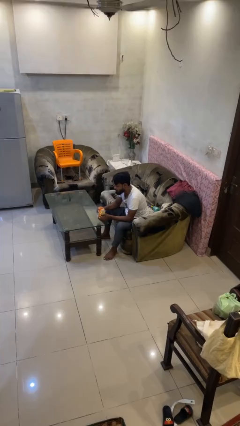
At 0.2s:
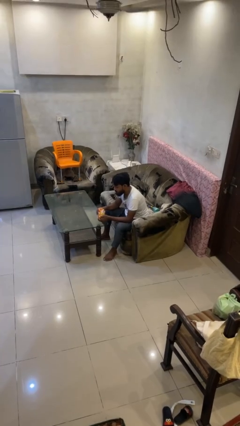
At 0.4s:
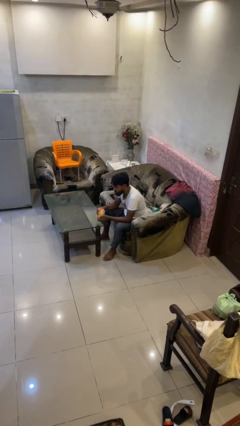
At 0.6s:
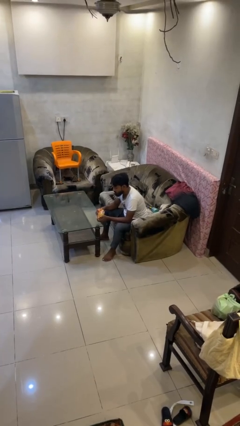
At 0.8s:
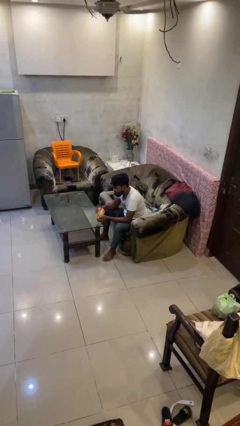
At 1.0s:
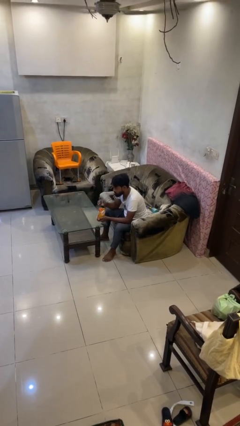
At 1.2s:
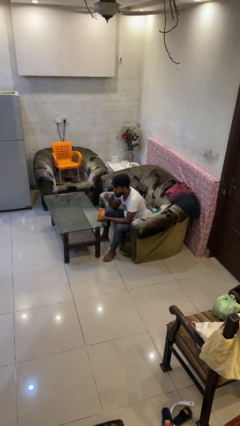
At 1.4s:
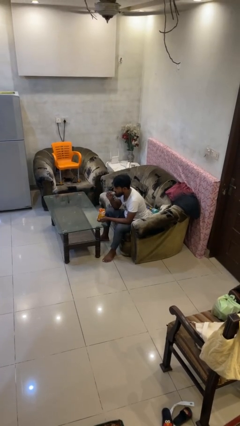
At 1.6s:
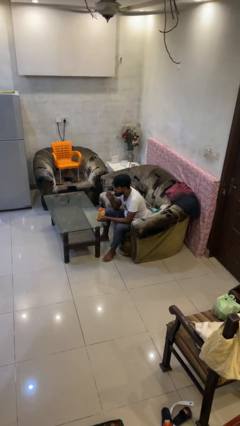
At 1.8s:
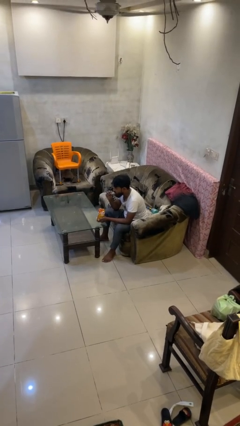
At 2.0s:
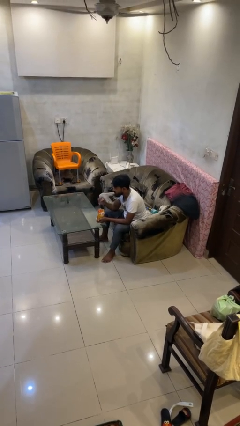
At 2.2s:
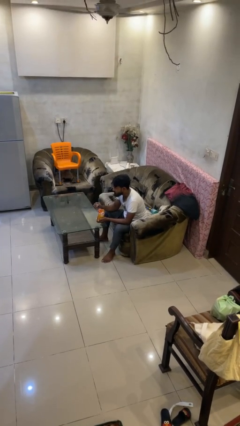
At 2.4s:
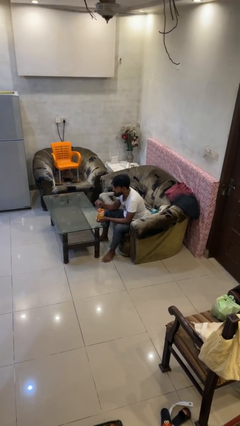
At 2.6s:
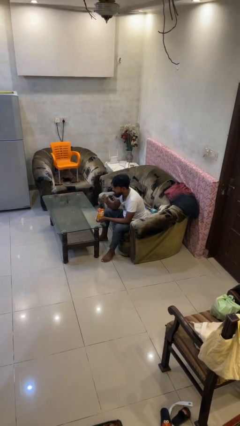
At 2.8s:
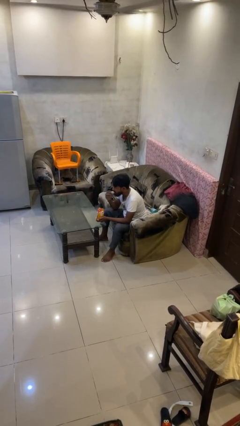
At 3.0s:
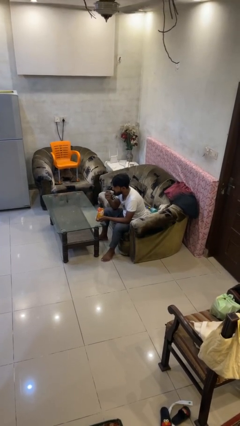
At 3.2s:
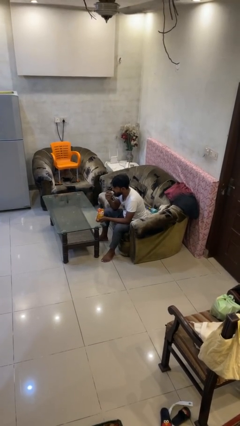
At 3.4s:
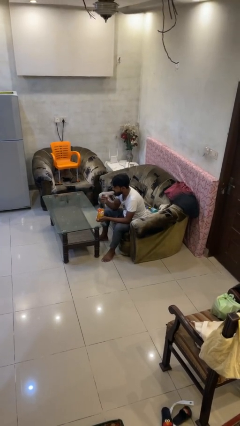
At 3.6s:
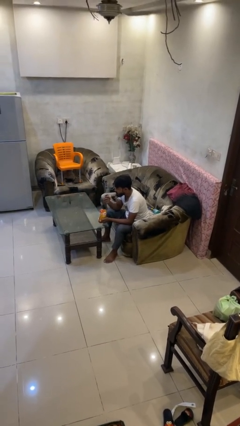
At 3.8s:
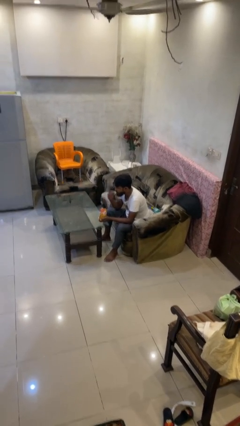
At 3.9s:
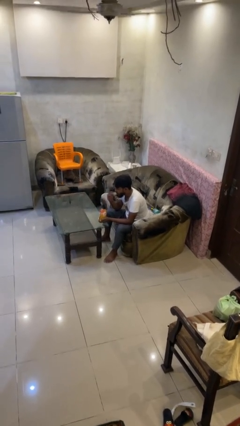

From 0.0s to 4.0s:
person eats snack from bag

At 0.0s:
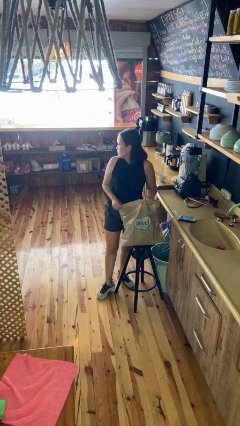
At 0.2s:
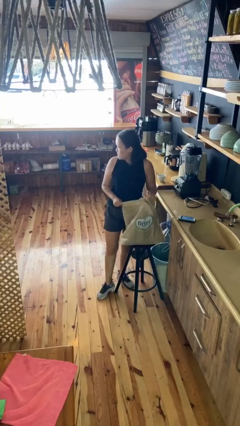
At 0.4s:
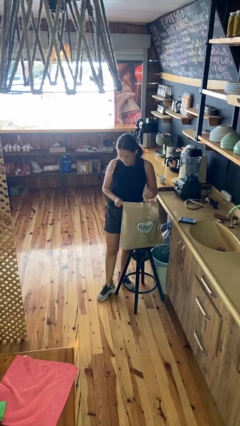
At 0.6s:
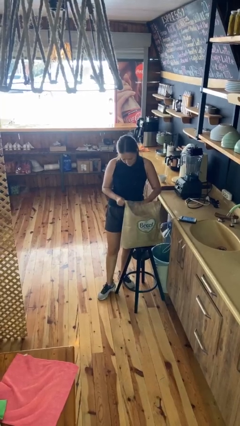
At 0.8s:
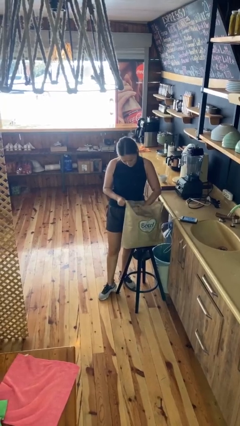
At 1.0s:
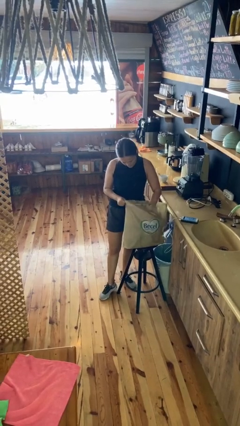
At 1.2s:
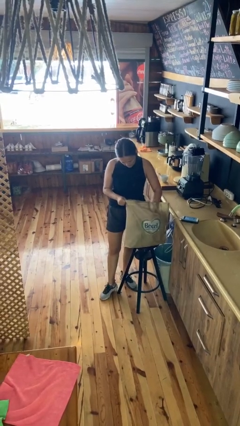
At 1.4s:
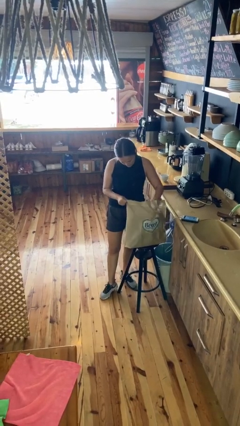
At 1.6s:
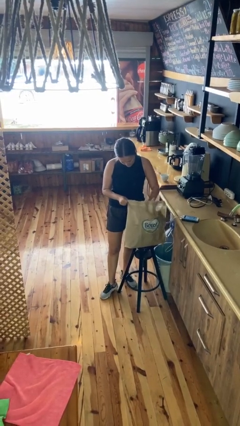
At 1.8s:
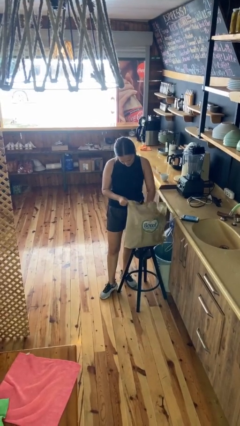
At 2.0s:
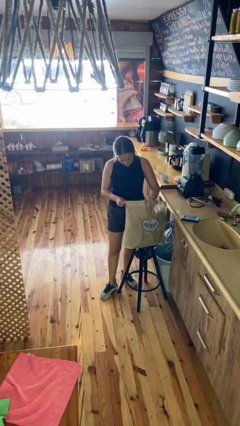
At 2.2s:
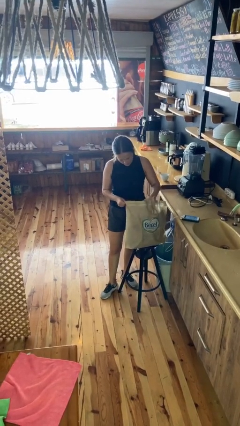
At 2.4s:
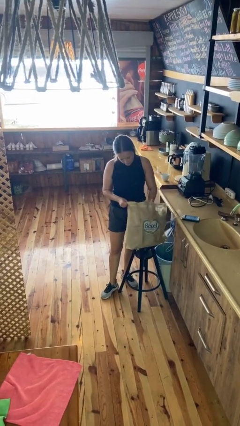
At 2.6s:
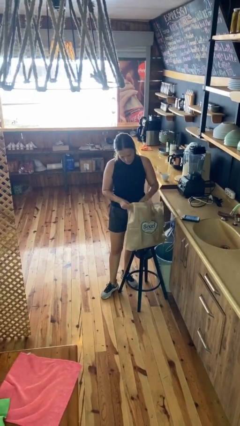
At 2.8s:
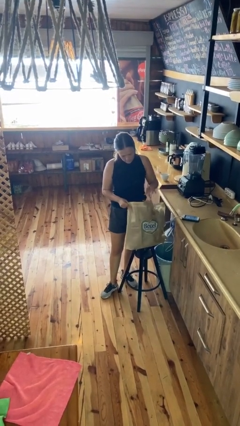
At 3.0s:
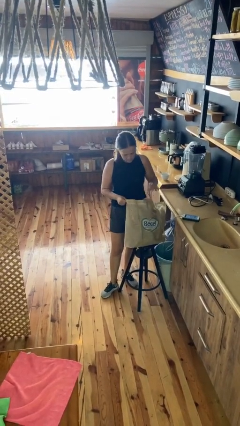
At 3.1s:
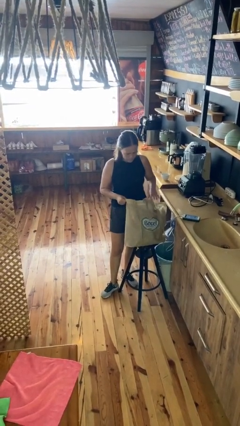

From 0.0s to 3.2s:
person searches in bag

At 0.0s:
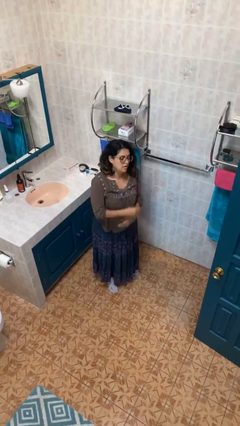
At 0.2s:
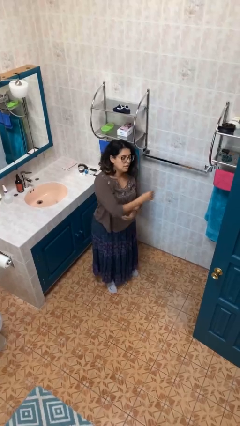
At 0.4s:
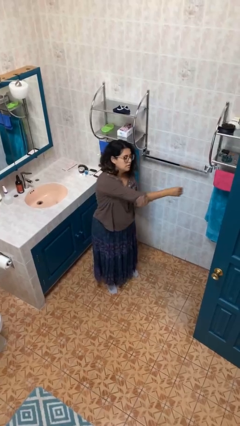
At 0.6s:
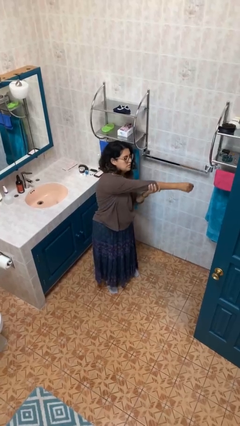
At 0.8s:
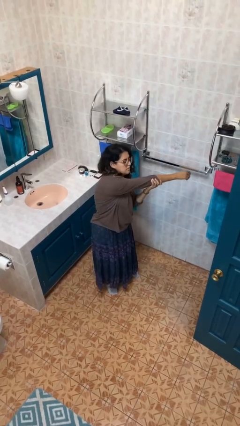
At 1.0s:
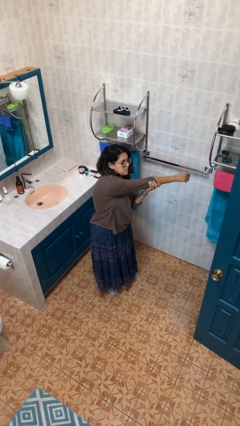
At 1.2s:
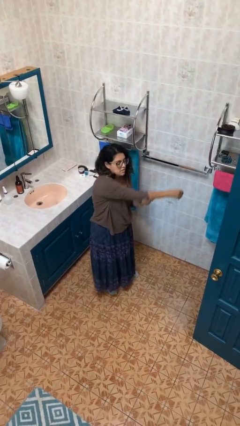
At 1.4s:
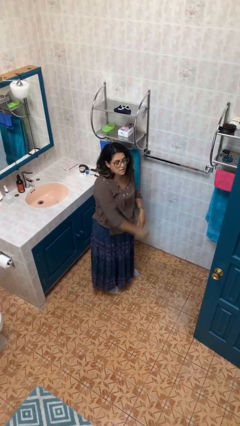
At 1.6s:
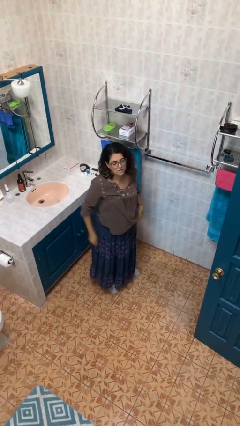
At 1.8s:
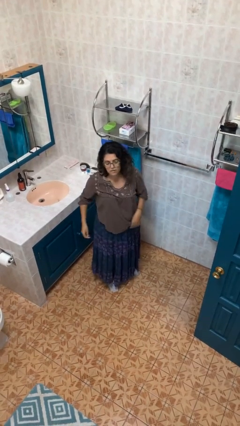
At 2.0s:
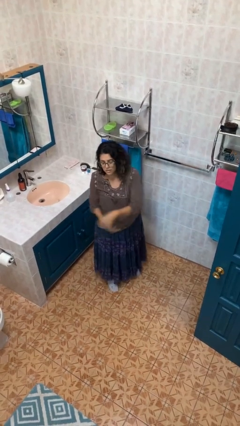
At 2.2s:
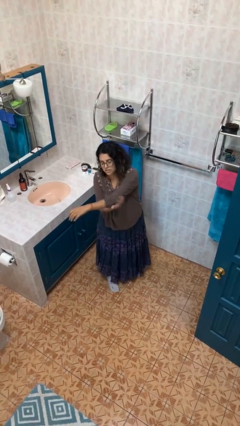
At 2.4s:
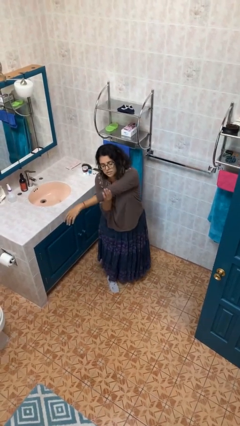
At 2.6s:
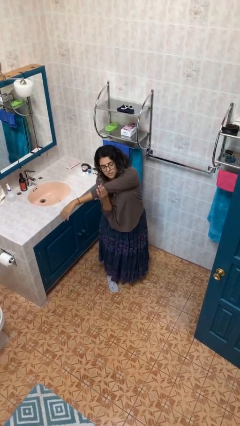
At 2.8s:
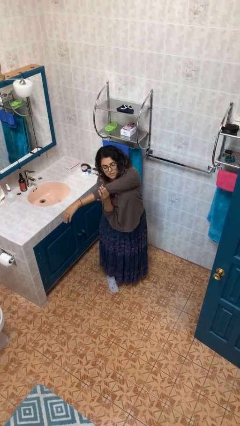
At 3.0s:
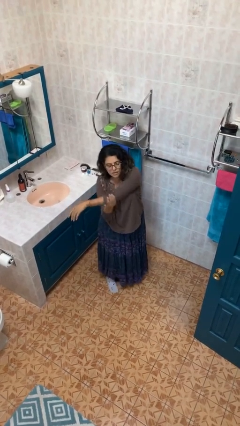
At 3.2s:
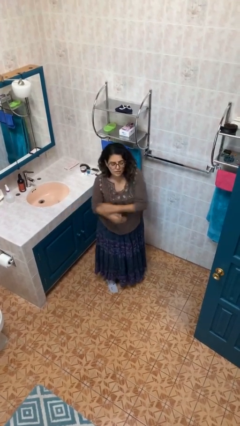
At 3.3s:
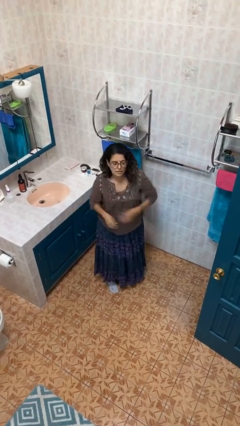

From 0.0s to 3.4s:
person stretches arms to side

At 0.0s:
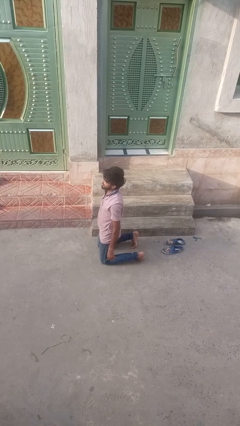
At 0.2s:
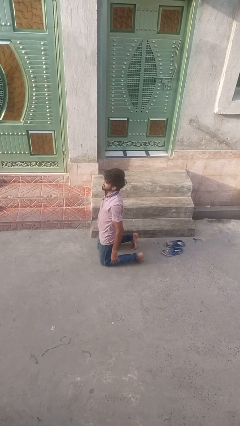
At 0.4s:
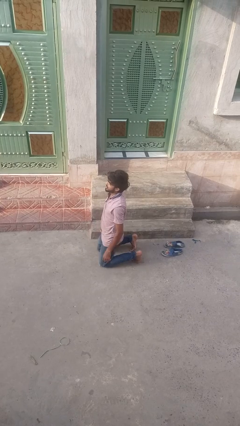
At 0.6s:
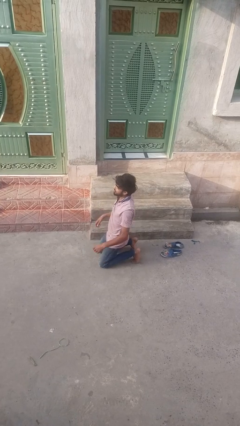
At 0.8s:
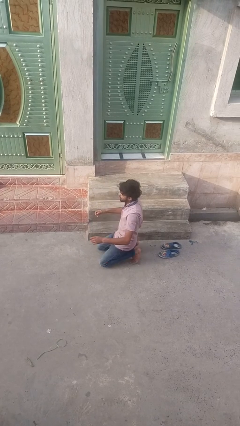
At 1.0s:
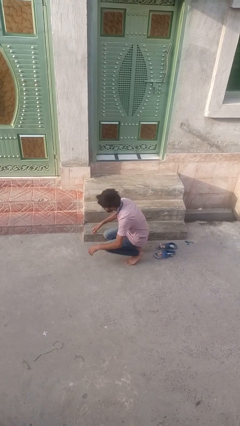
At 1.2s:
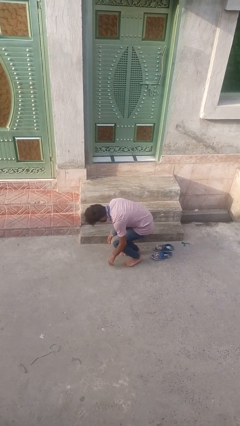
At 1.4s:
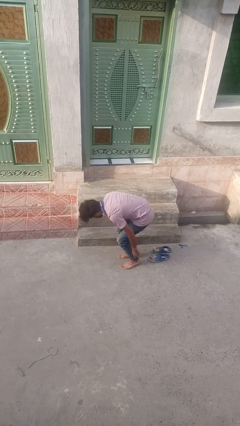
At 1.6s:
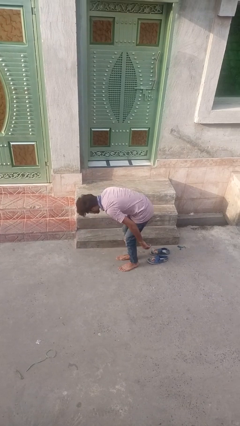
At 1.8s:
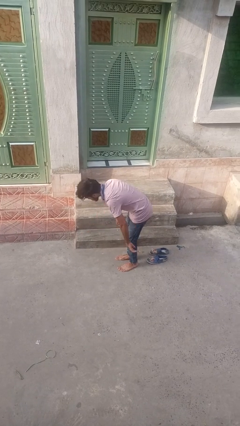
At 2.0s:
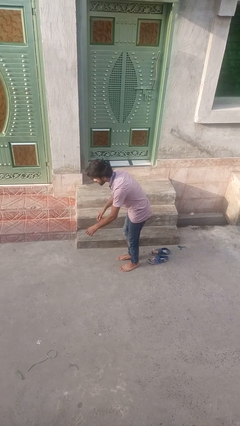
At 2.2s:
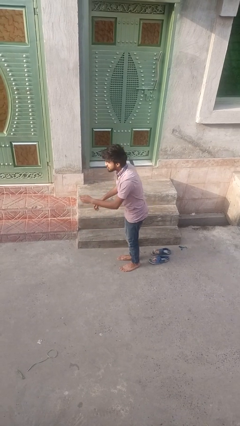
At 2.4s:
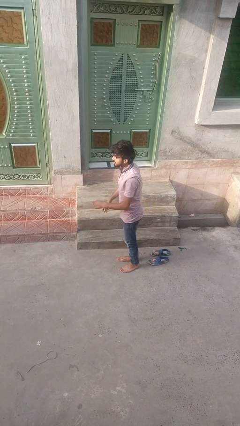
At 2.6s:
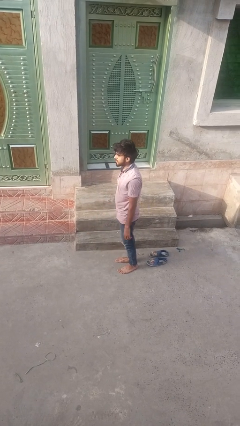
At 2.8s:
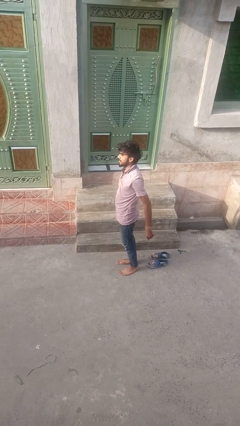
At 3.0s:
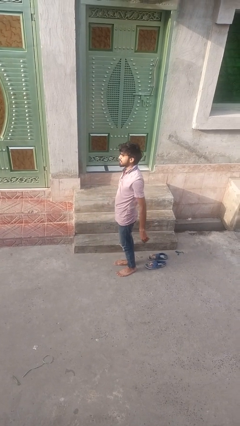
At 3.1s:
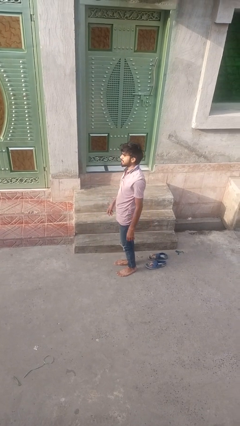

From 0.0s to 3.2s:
person stands up from floor

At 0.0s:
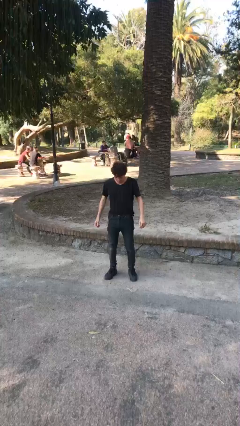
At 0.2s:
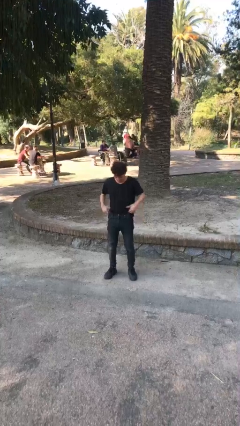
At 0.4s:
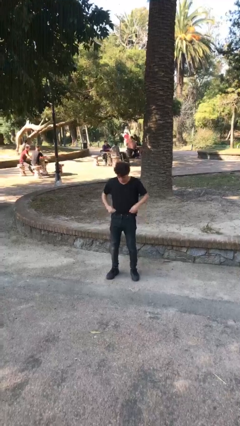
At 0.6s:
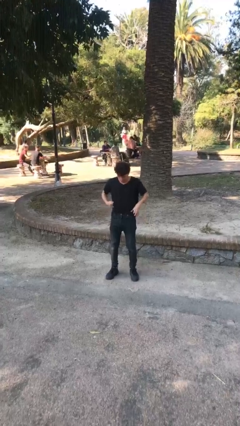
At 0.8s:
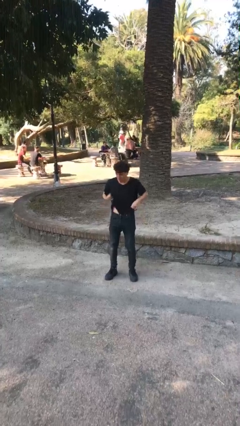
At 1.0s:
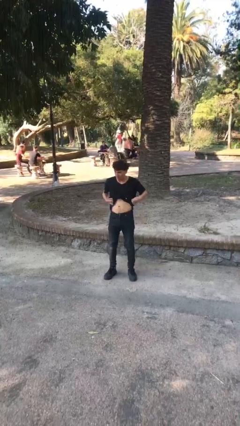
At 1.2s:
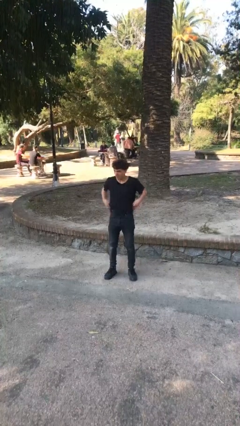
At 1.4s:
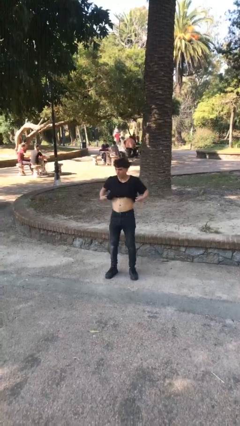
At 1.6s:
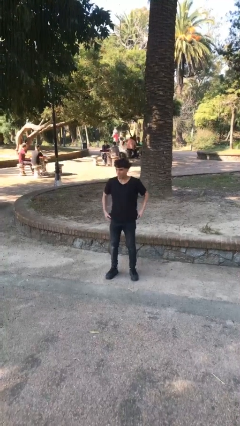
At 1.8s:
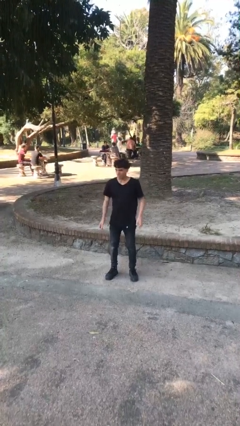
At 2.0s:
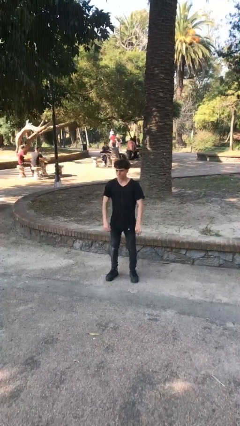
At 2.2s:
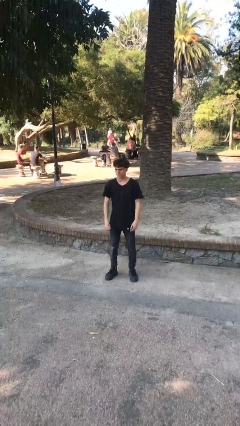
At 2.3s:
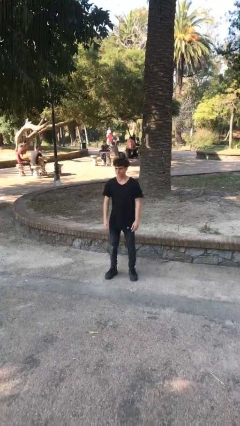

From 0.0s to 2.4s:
person untucks shirt

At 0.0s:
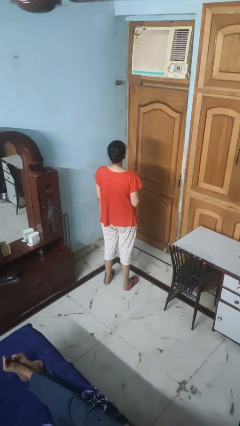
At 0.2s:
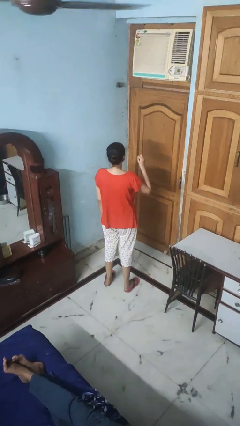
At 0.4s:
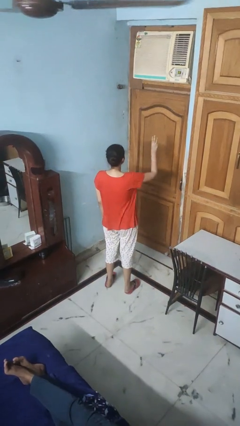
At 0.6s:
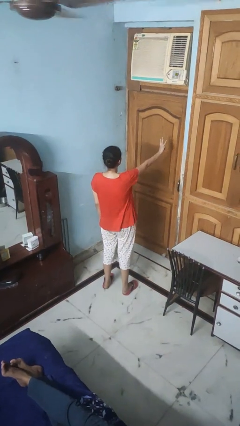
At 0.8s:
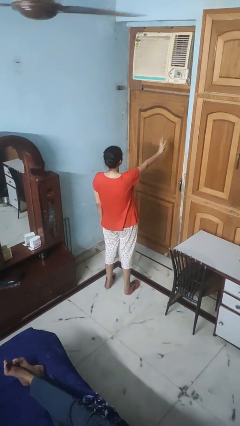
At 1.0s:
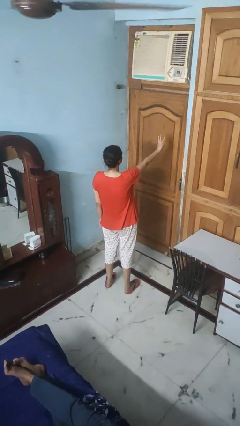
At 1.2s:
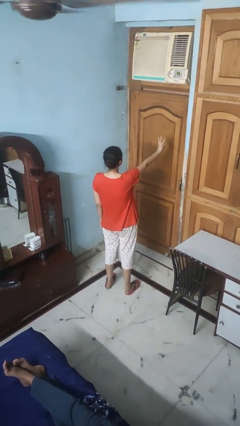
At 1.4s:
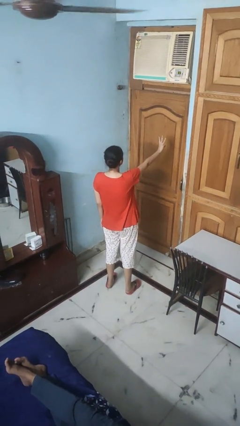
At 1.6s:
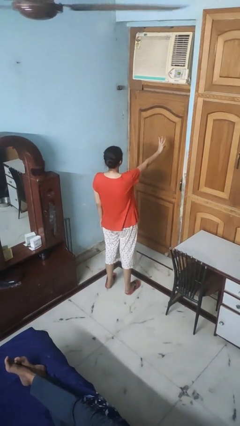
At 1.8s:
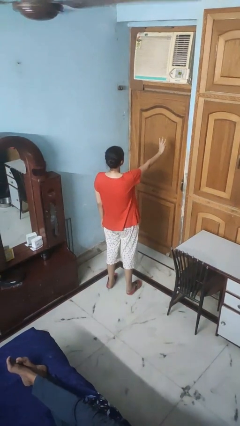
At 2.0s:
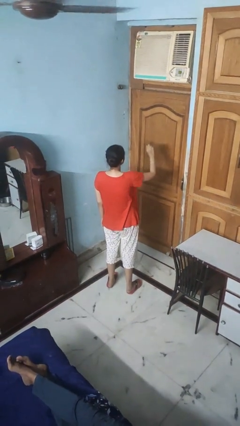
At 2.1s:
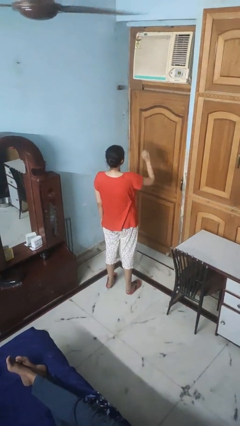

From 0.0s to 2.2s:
person gestures number three
